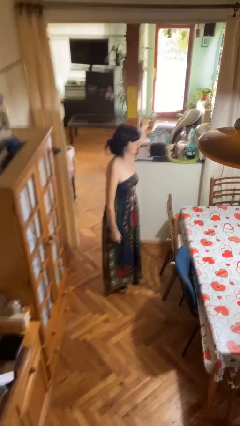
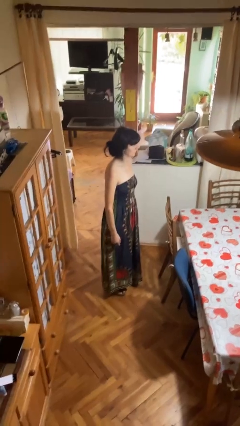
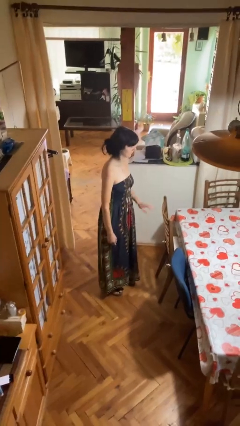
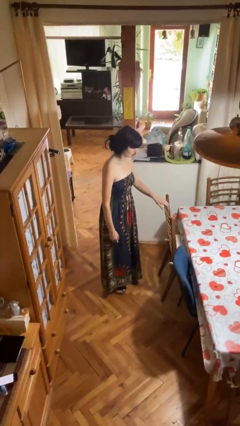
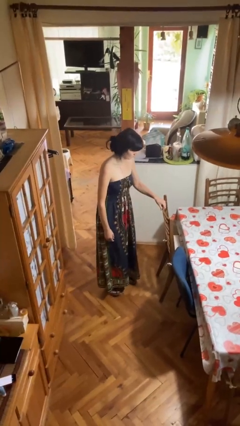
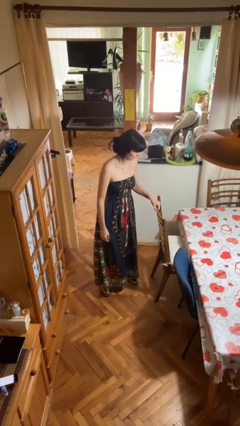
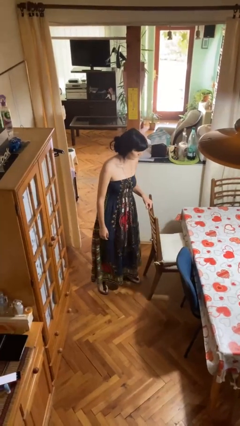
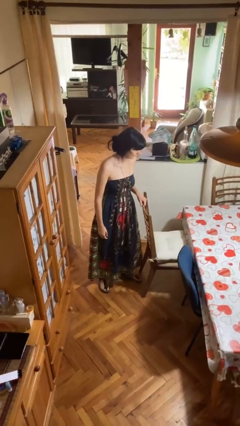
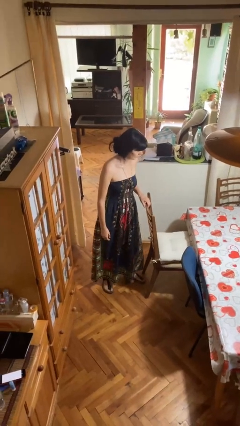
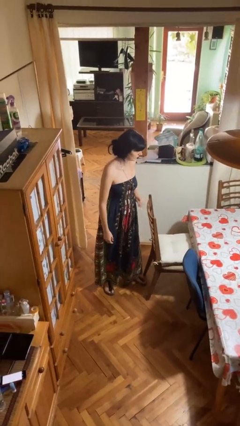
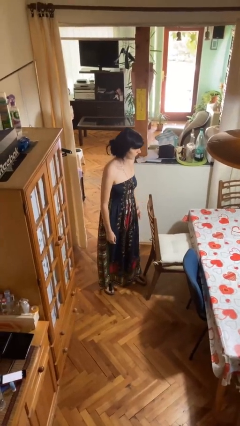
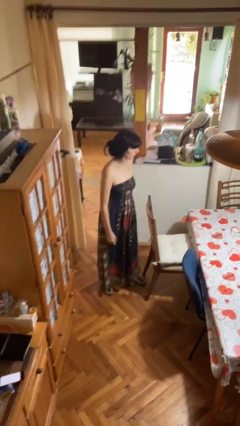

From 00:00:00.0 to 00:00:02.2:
person pulls out chair

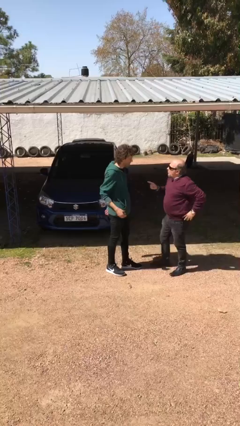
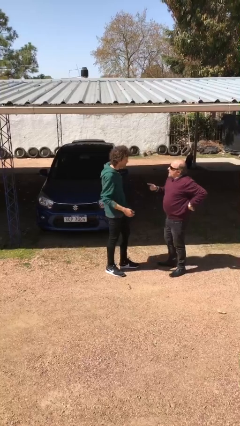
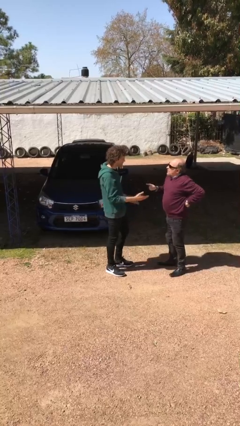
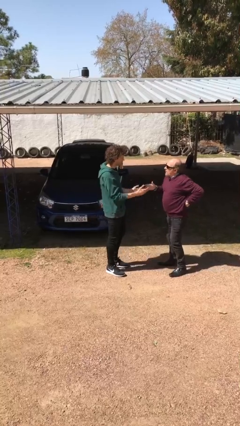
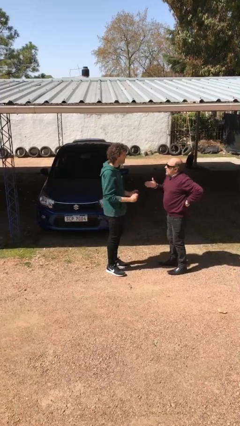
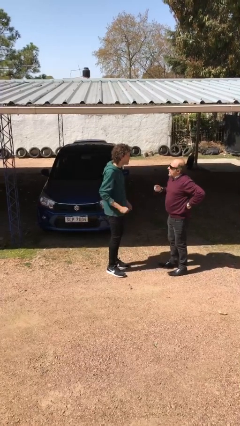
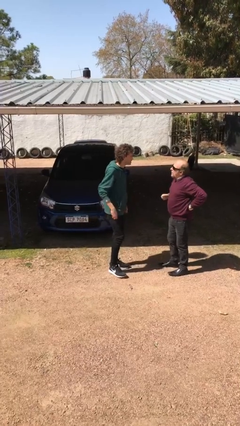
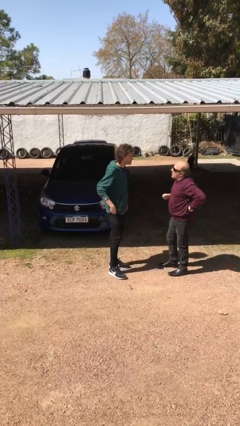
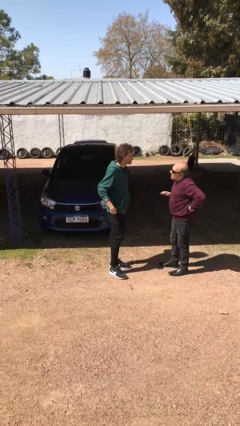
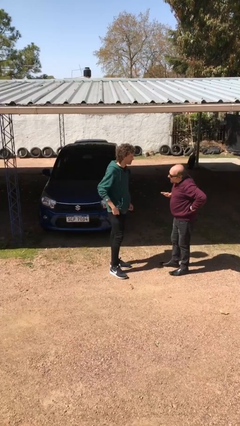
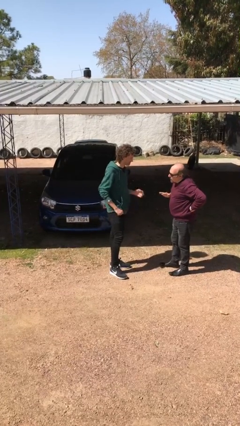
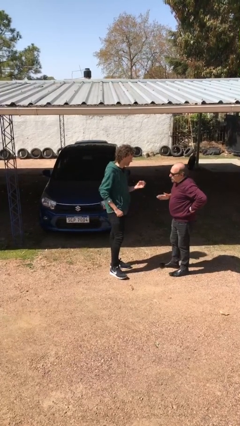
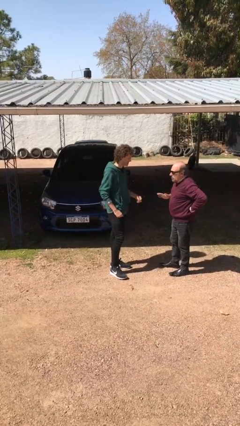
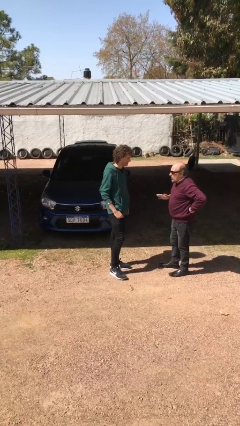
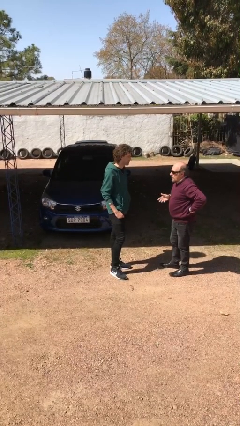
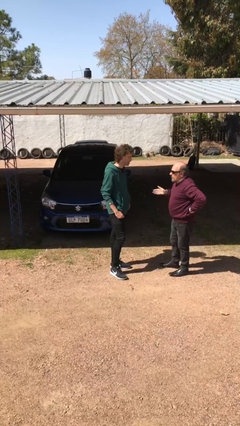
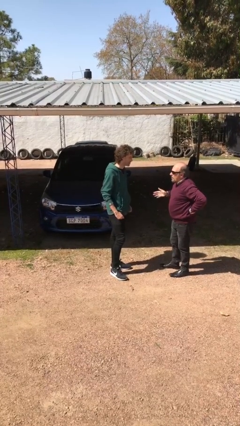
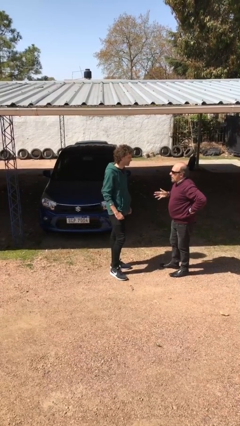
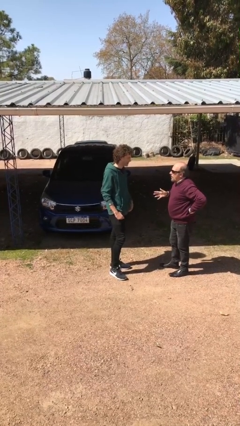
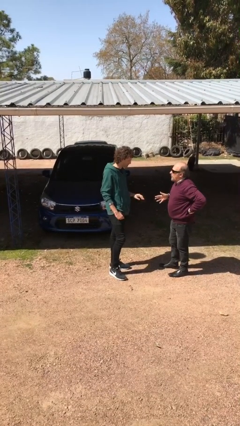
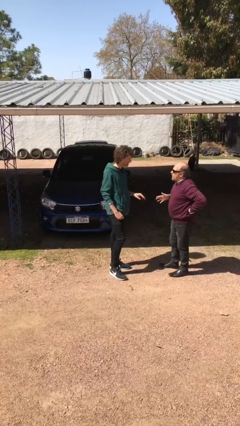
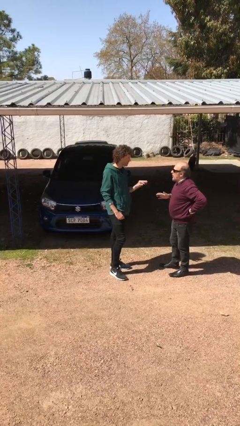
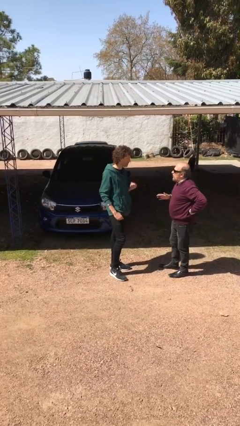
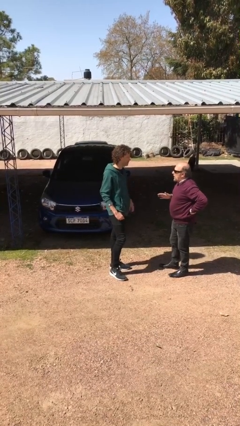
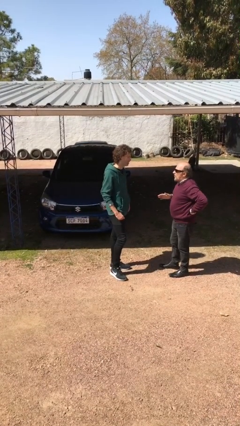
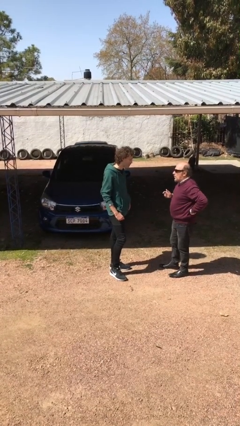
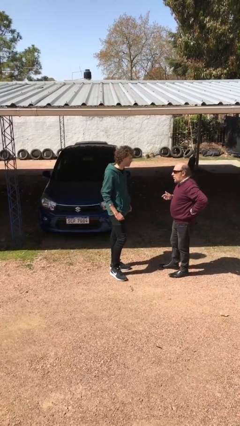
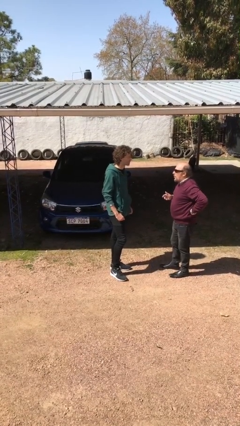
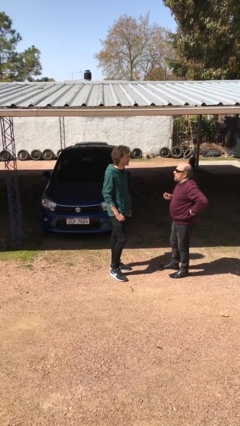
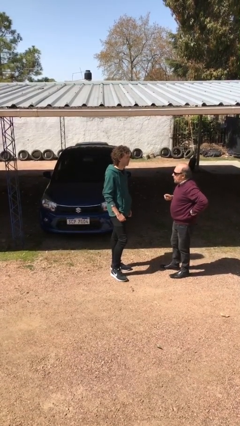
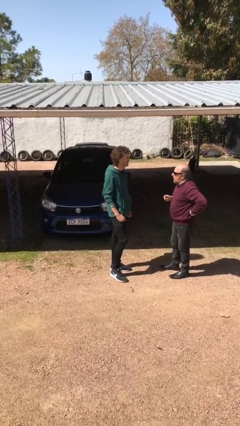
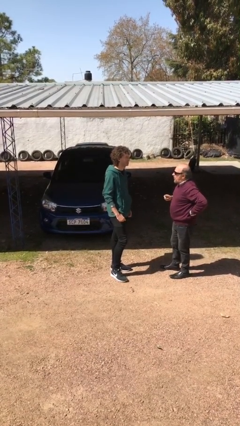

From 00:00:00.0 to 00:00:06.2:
person talks to person

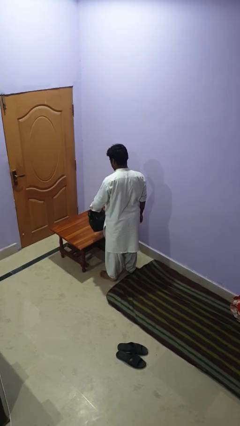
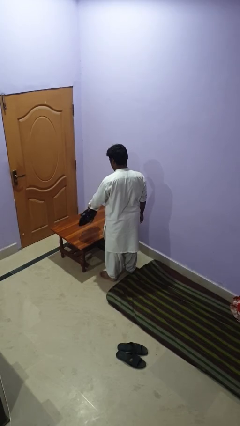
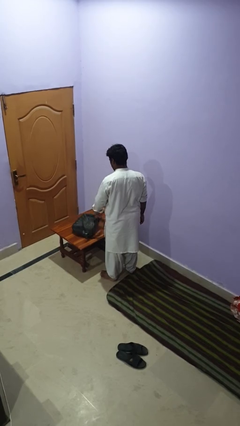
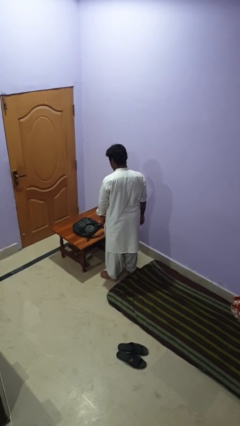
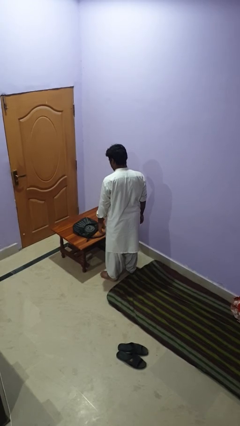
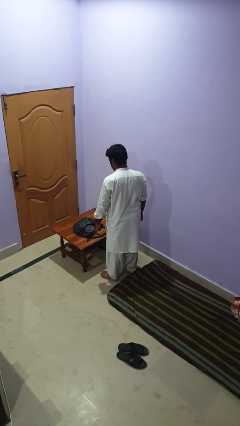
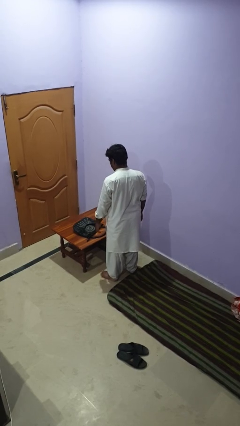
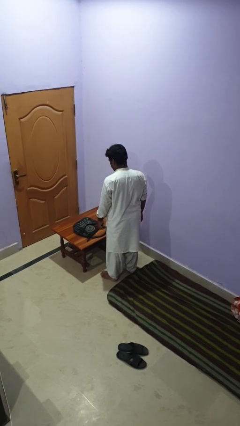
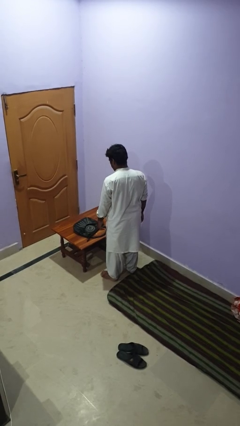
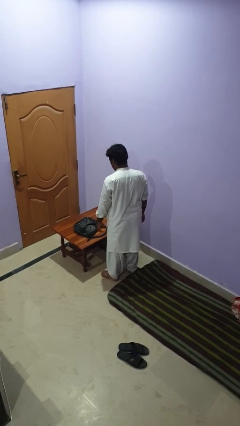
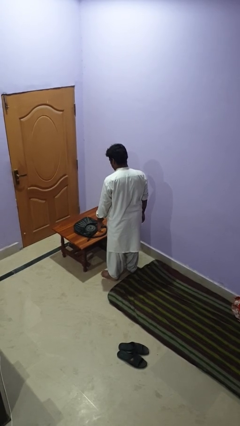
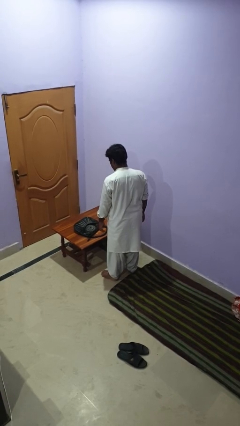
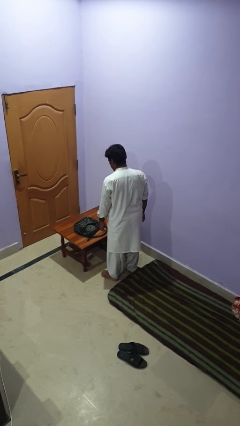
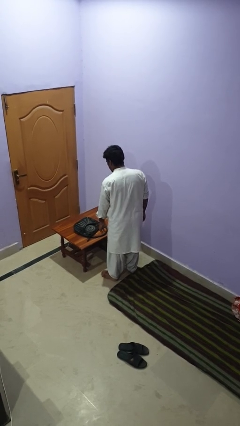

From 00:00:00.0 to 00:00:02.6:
person throws object on table

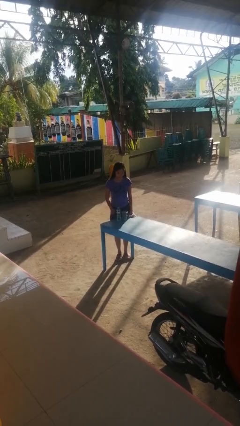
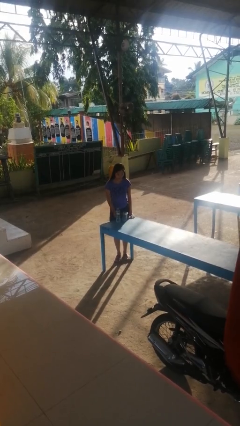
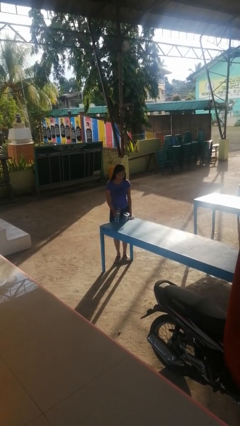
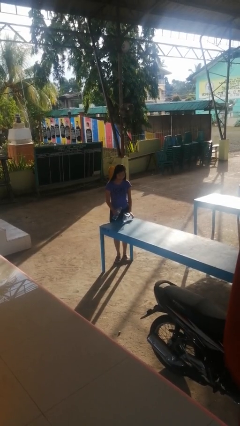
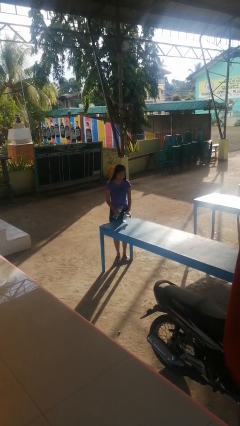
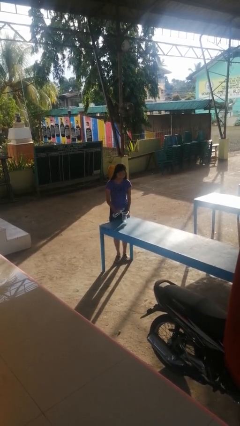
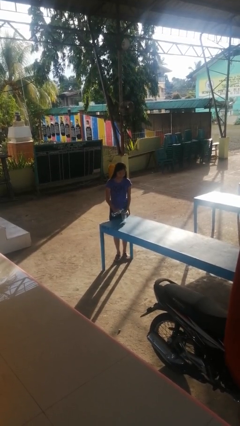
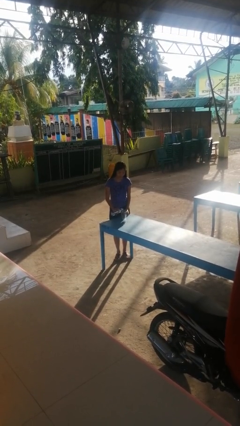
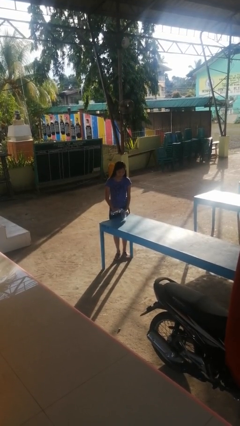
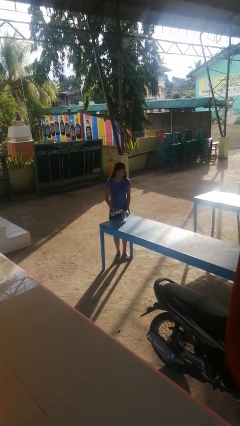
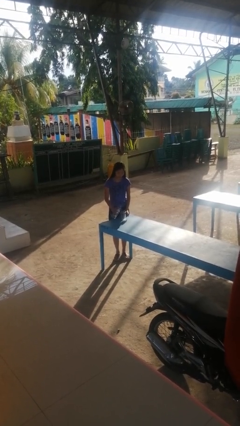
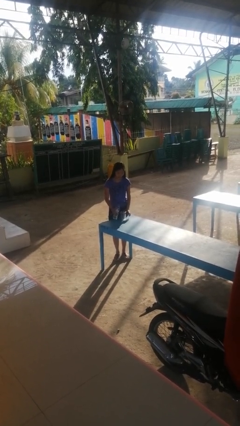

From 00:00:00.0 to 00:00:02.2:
person pours liquid into cup

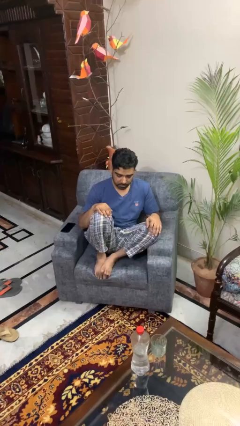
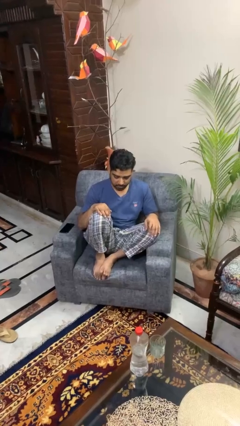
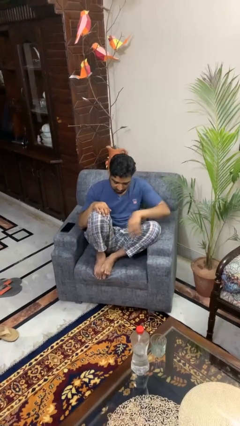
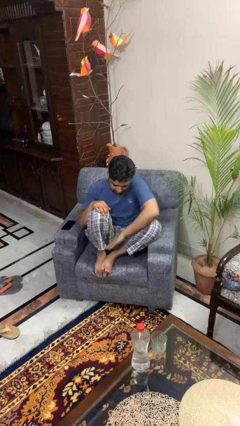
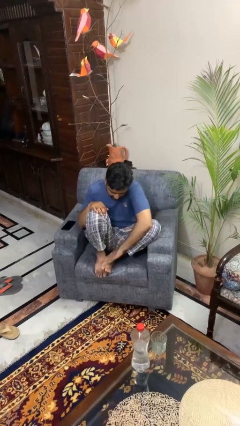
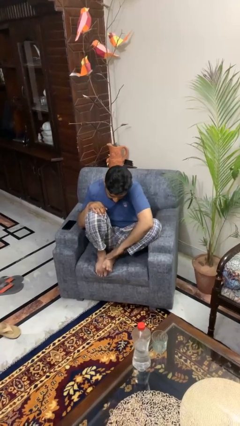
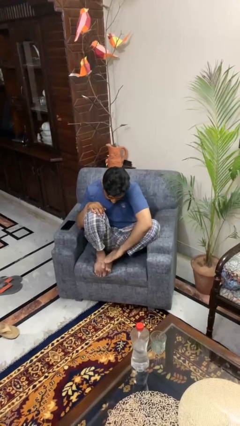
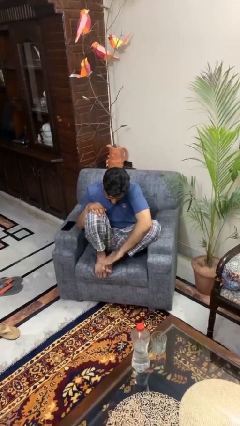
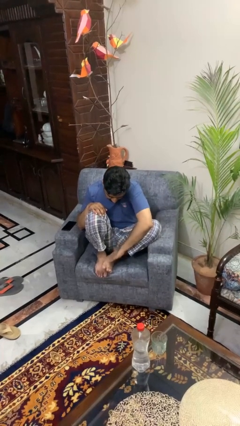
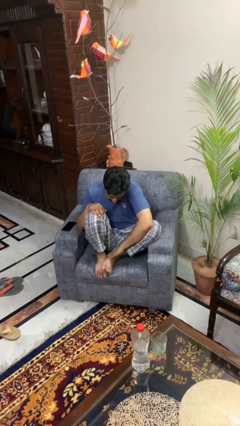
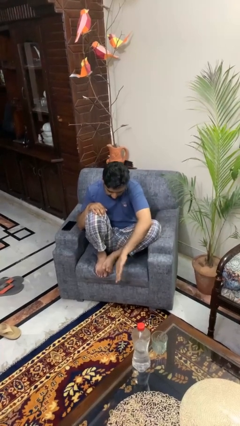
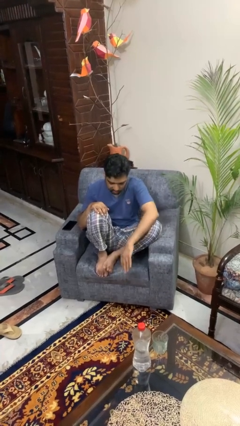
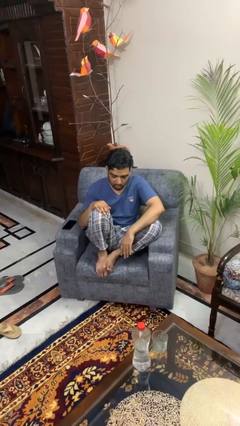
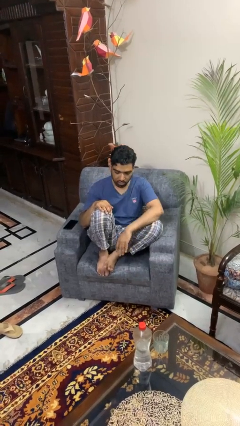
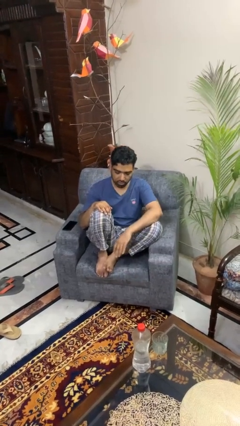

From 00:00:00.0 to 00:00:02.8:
person rubs foot

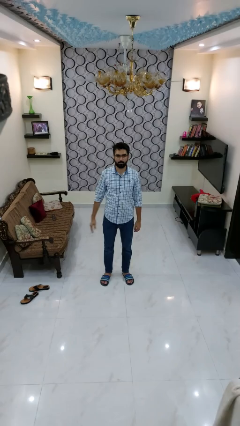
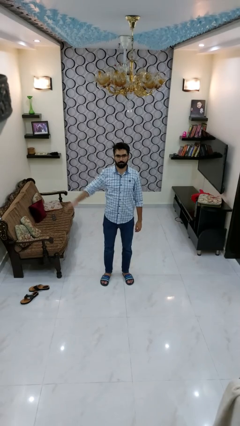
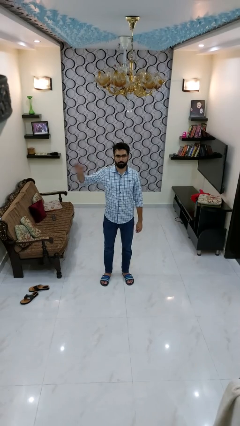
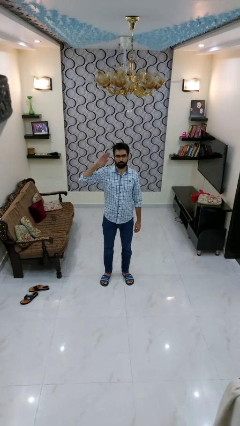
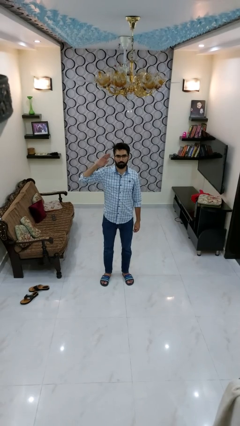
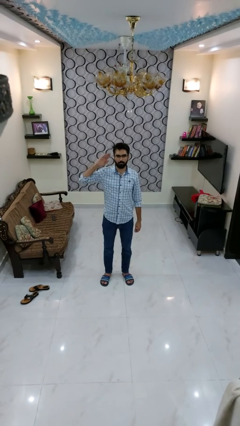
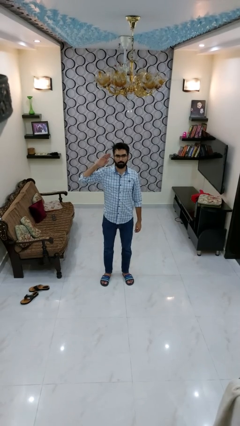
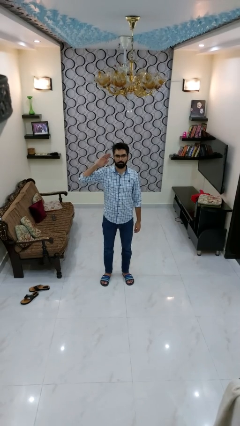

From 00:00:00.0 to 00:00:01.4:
person salutes
